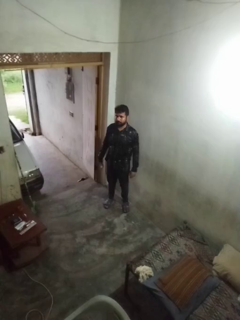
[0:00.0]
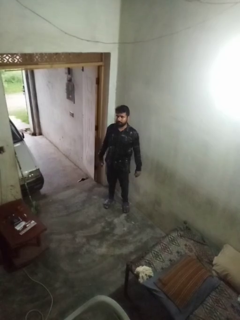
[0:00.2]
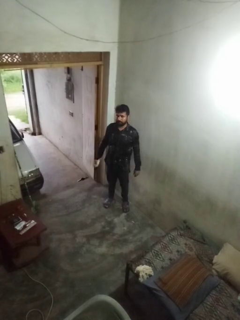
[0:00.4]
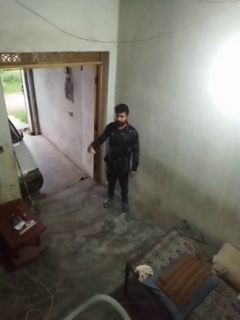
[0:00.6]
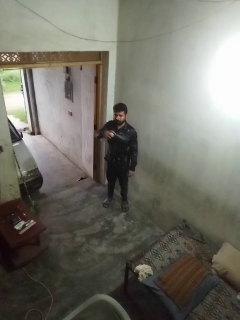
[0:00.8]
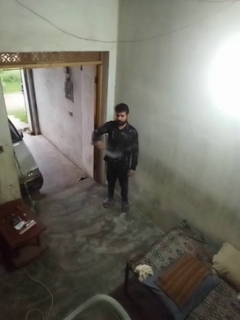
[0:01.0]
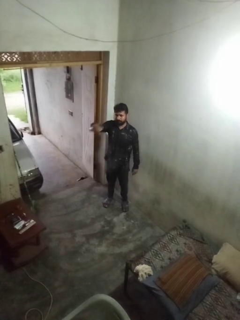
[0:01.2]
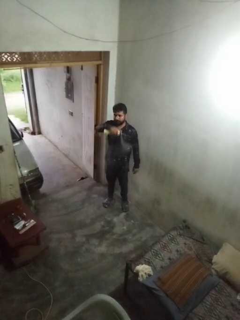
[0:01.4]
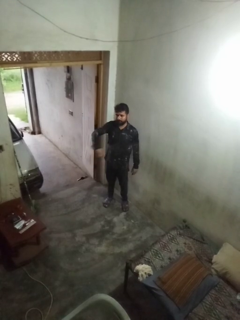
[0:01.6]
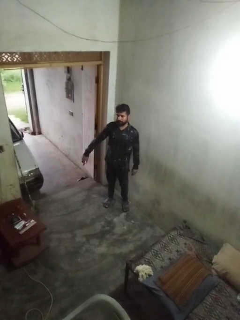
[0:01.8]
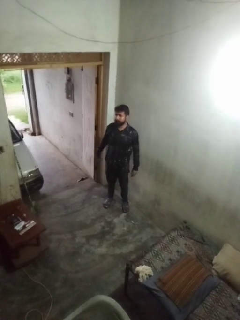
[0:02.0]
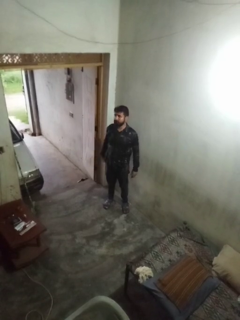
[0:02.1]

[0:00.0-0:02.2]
person applies deodorant

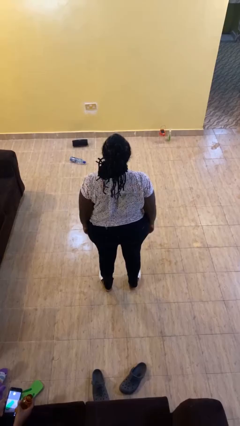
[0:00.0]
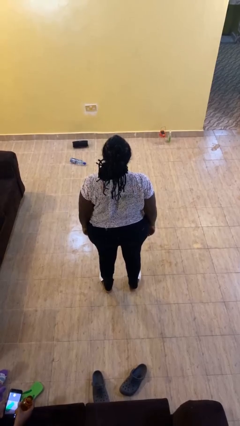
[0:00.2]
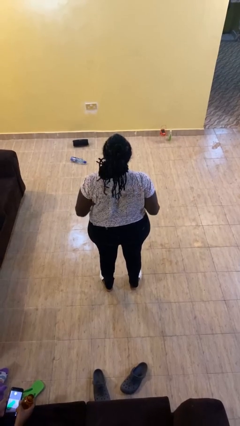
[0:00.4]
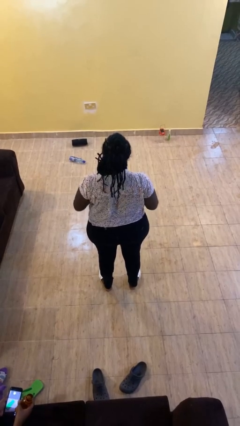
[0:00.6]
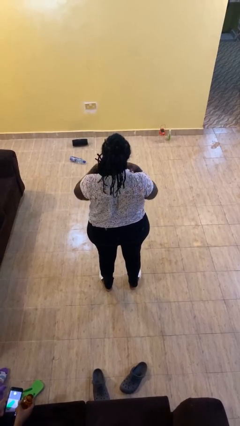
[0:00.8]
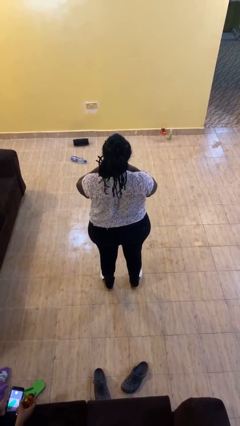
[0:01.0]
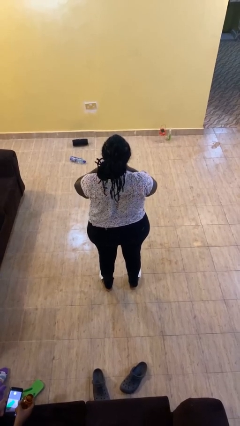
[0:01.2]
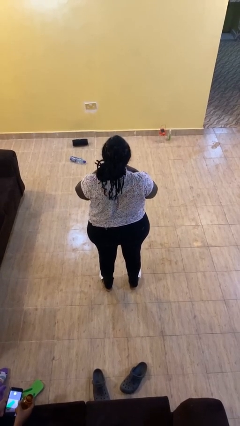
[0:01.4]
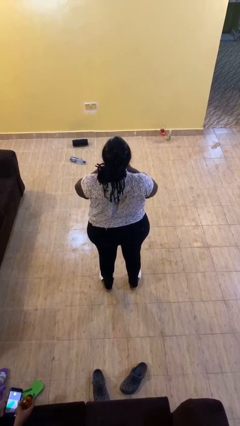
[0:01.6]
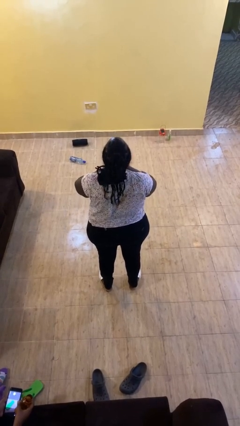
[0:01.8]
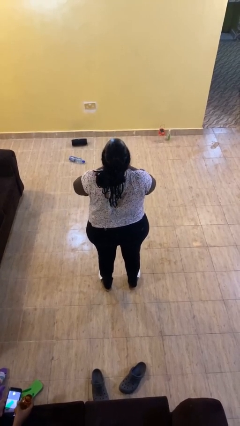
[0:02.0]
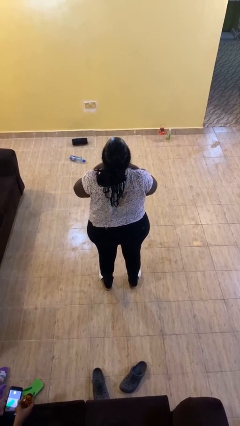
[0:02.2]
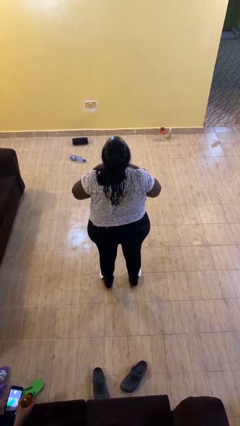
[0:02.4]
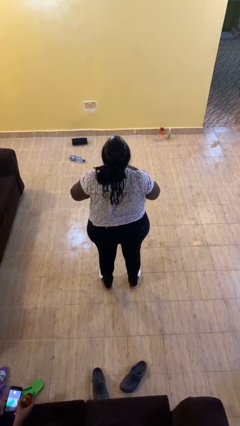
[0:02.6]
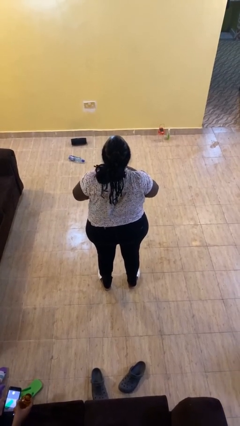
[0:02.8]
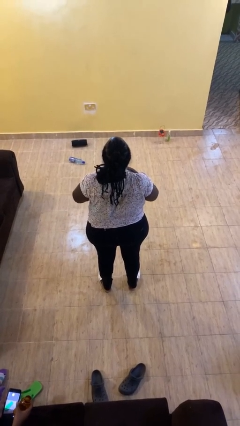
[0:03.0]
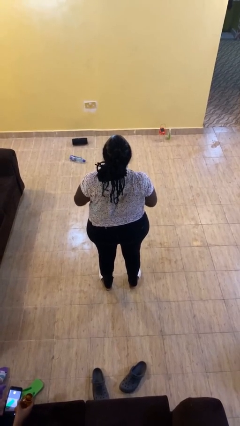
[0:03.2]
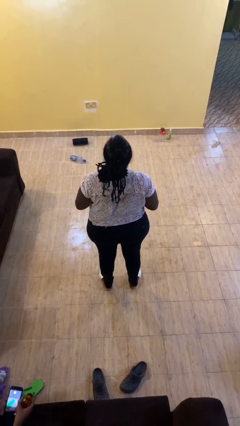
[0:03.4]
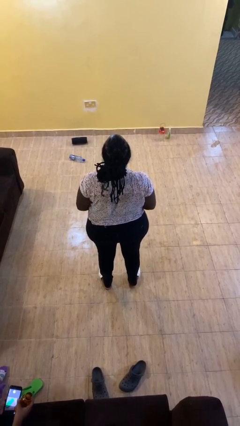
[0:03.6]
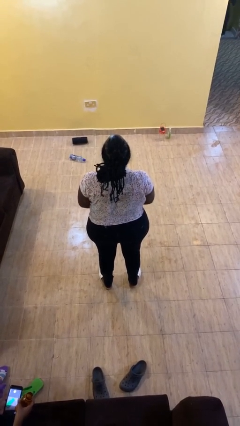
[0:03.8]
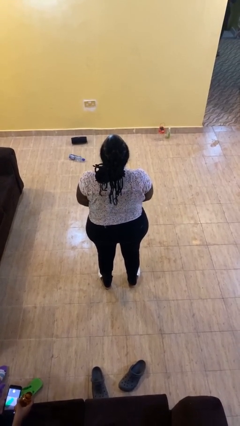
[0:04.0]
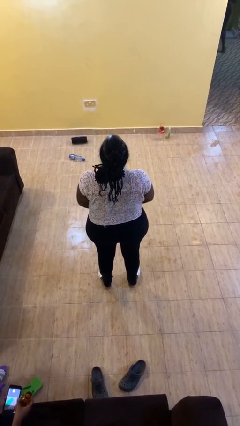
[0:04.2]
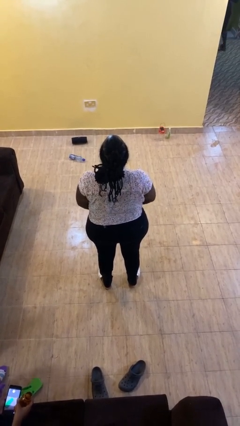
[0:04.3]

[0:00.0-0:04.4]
person buttons shirt

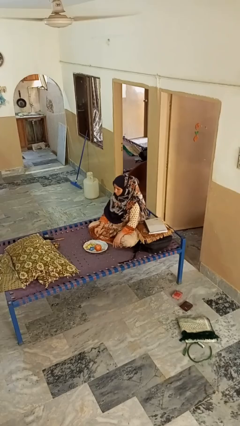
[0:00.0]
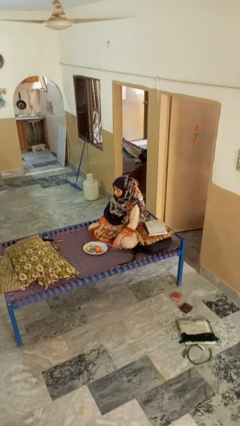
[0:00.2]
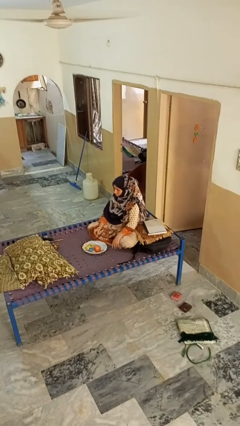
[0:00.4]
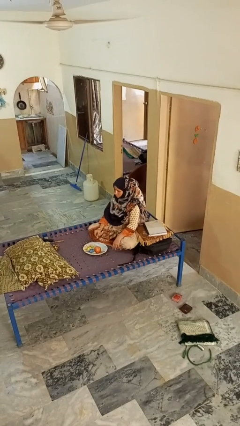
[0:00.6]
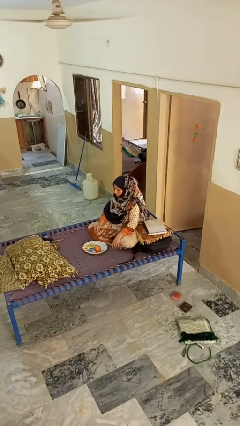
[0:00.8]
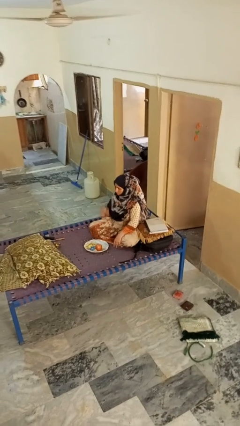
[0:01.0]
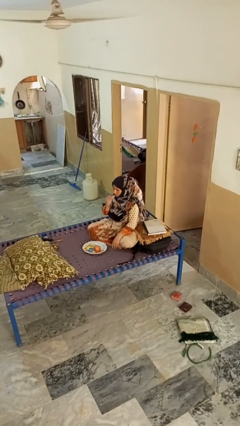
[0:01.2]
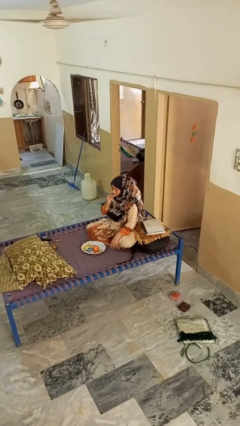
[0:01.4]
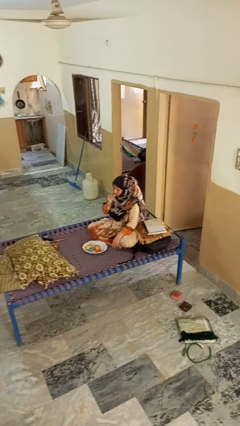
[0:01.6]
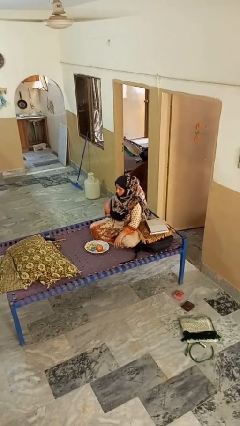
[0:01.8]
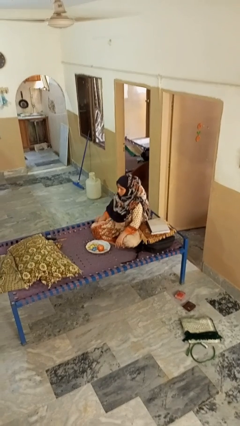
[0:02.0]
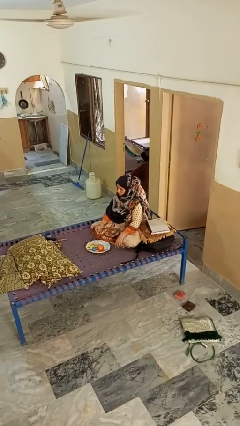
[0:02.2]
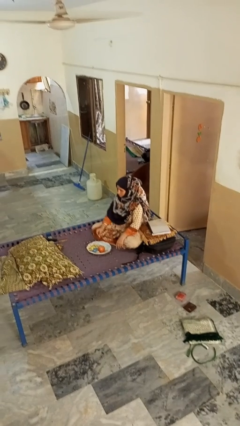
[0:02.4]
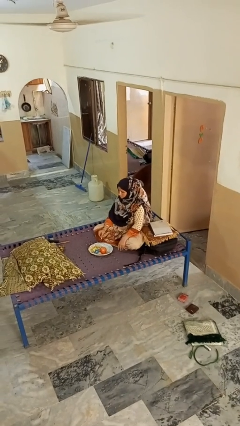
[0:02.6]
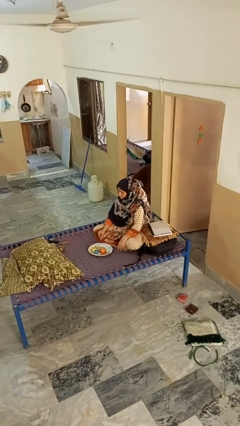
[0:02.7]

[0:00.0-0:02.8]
person eats apple

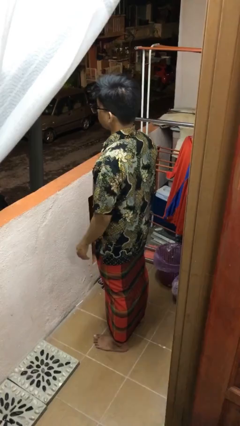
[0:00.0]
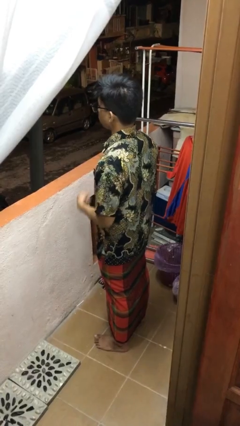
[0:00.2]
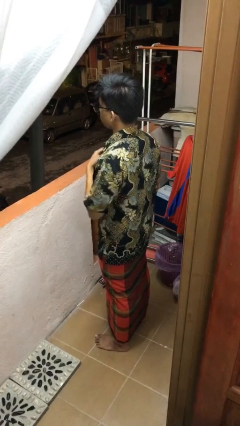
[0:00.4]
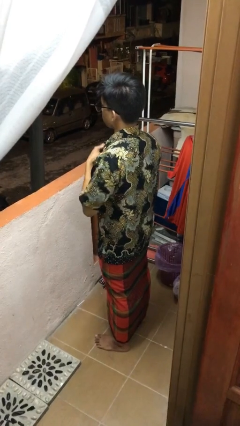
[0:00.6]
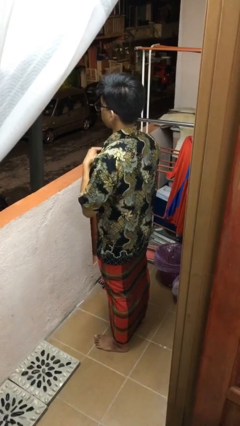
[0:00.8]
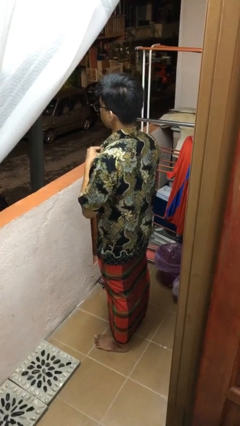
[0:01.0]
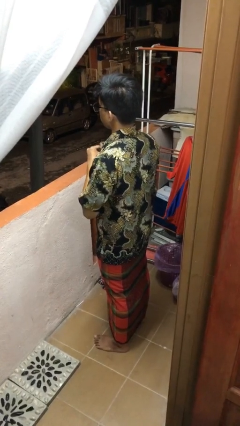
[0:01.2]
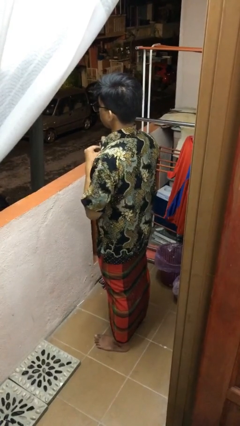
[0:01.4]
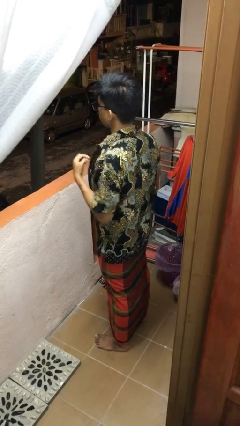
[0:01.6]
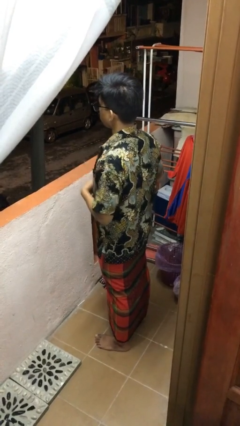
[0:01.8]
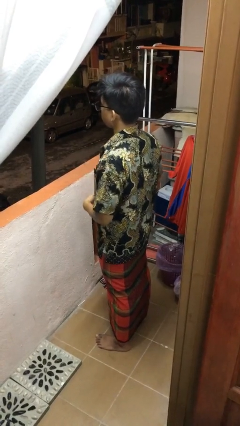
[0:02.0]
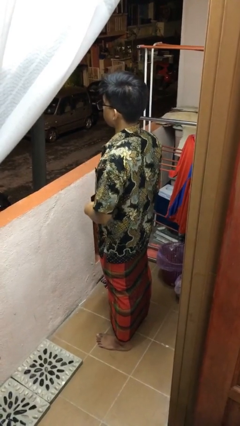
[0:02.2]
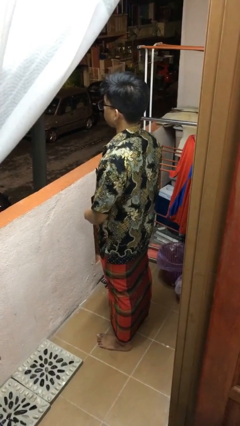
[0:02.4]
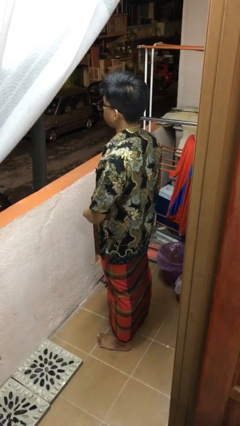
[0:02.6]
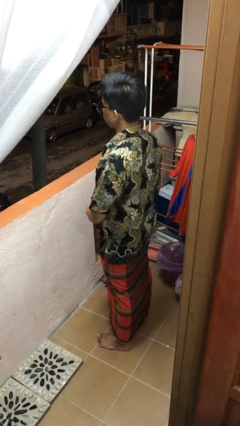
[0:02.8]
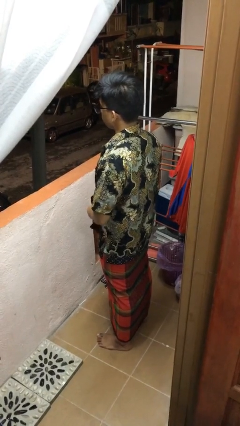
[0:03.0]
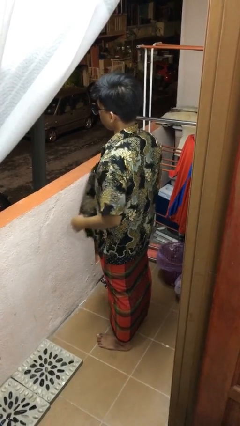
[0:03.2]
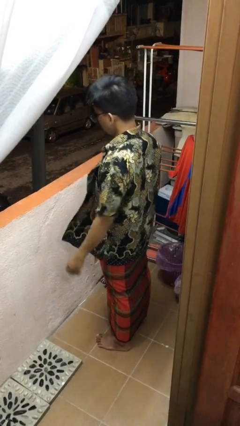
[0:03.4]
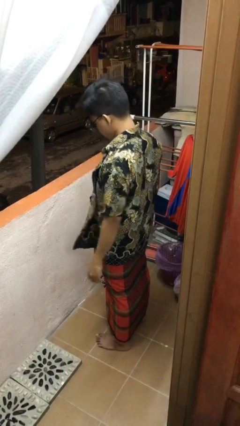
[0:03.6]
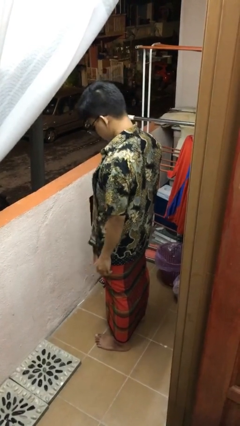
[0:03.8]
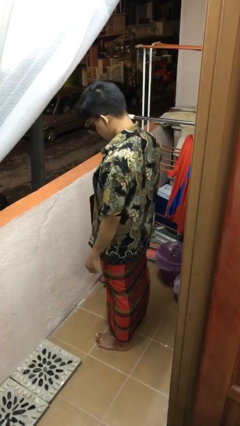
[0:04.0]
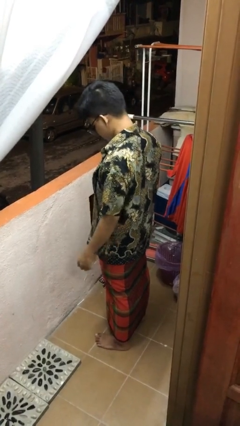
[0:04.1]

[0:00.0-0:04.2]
person unbuttons shirt

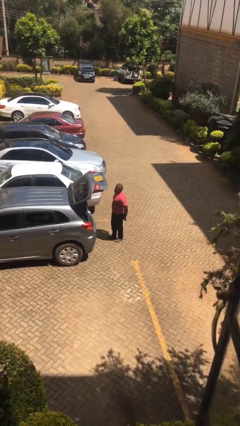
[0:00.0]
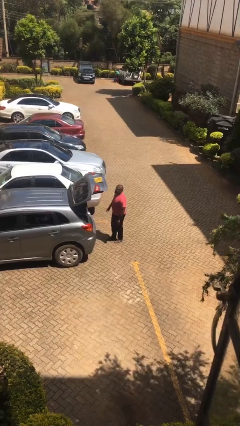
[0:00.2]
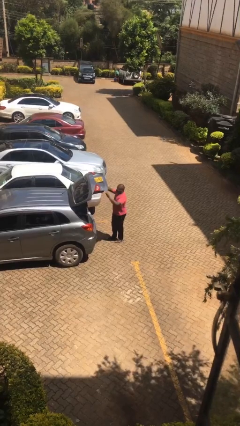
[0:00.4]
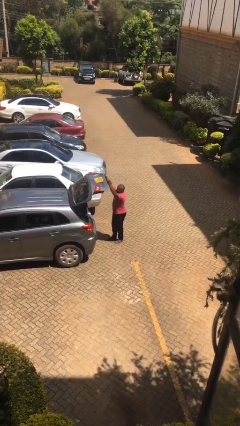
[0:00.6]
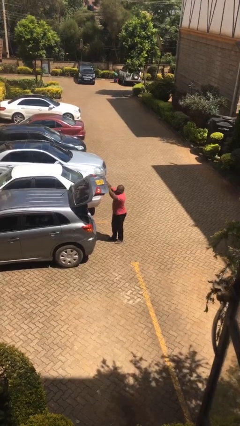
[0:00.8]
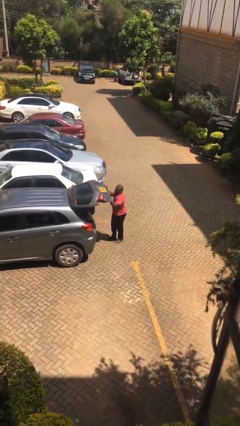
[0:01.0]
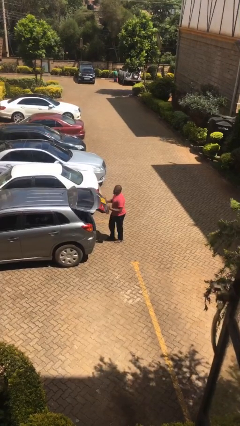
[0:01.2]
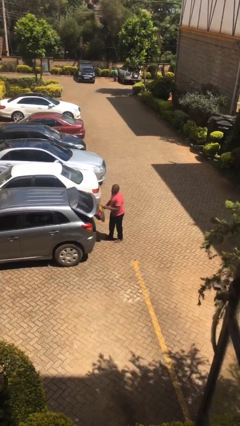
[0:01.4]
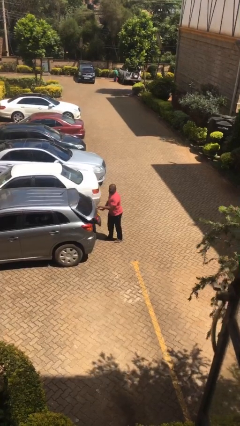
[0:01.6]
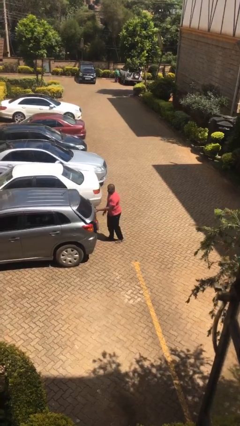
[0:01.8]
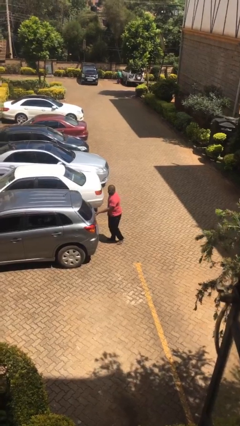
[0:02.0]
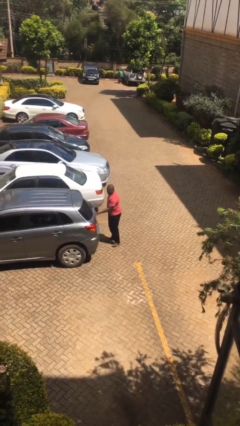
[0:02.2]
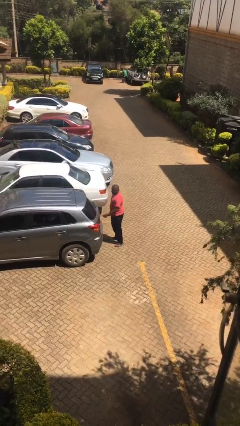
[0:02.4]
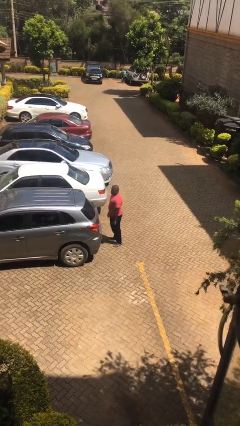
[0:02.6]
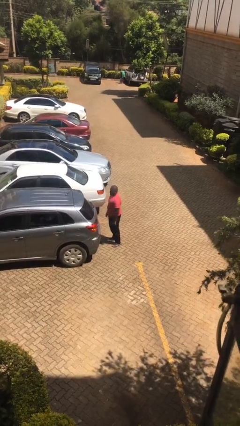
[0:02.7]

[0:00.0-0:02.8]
person closes car trunk

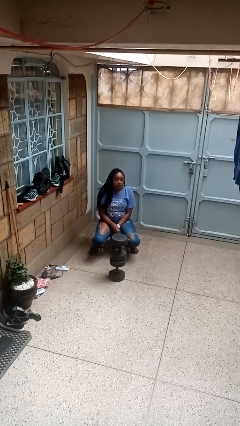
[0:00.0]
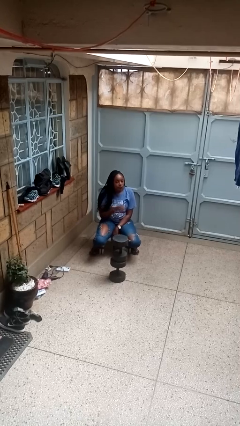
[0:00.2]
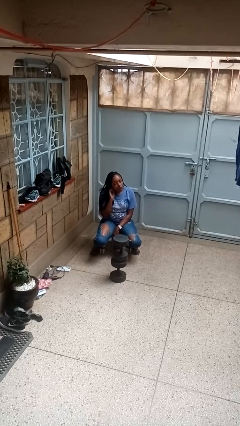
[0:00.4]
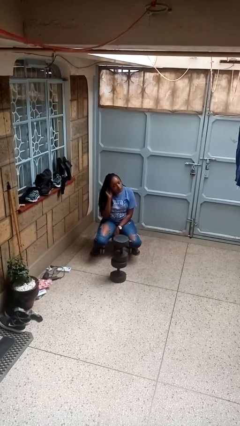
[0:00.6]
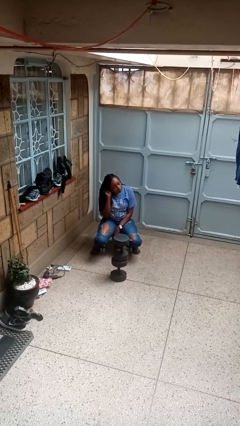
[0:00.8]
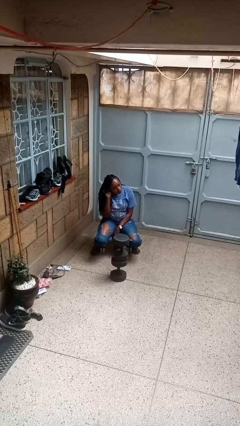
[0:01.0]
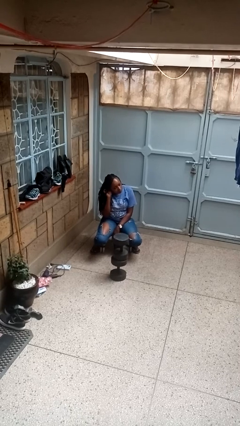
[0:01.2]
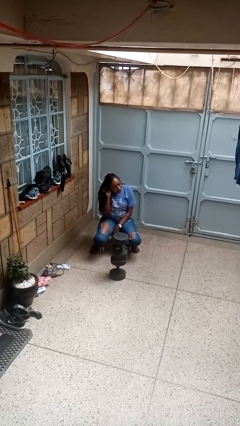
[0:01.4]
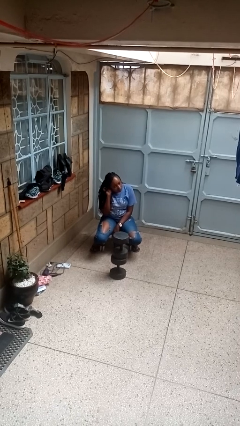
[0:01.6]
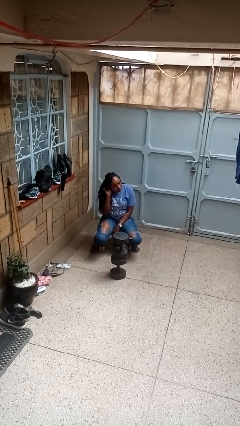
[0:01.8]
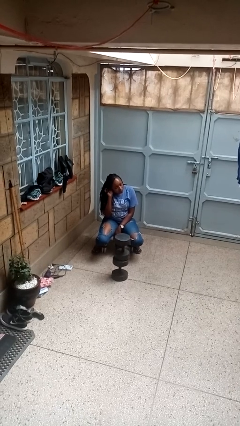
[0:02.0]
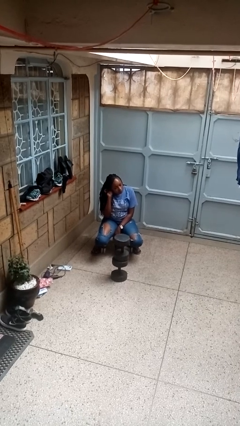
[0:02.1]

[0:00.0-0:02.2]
person gestures listen closely
